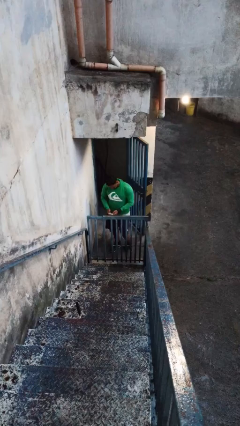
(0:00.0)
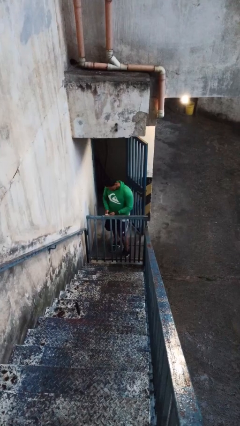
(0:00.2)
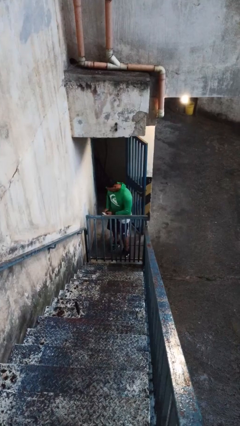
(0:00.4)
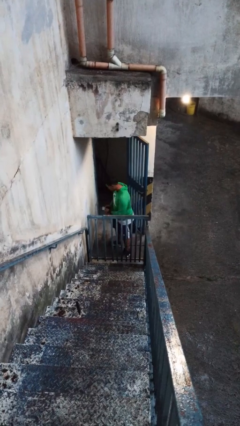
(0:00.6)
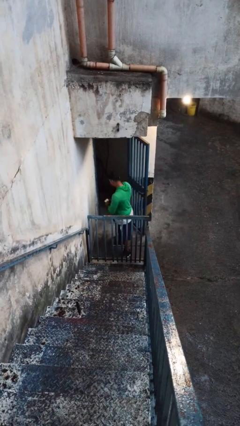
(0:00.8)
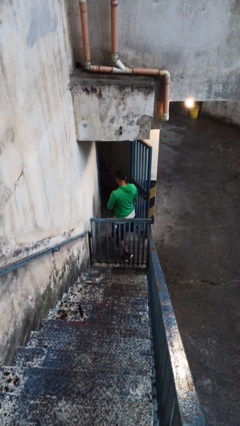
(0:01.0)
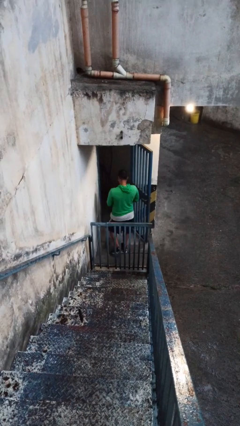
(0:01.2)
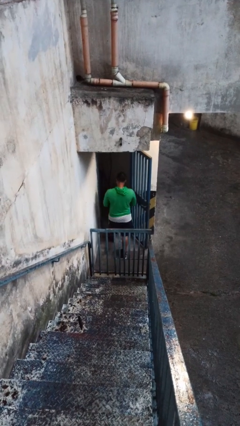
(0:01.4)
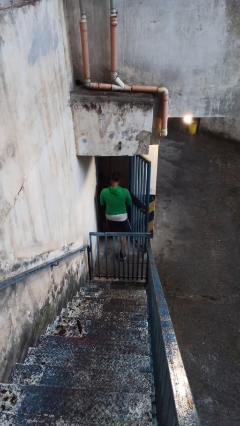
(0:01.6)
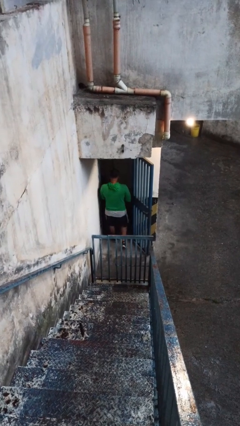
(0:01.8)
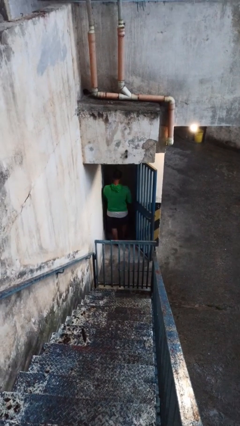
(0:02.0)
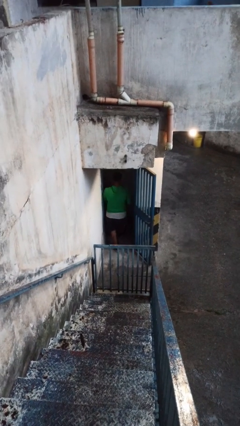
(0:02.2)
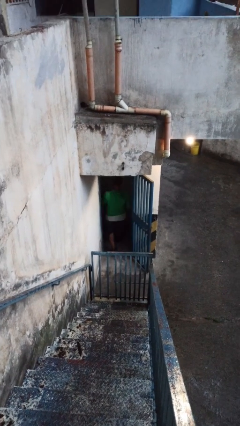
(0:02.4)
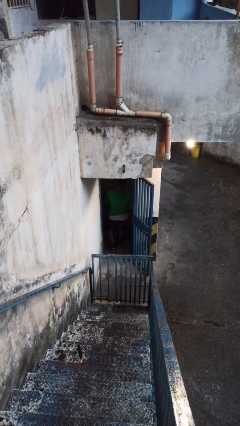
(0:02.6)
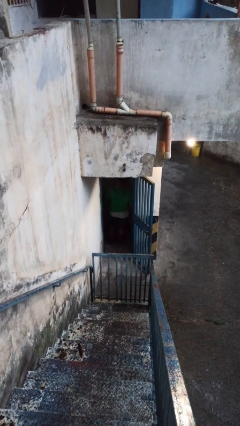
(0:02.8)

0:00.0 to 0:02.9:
person exits scene through structure

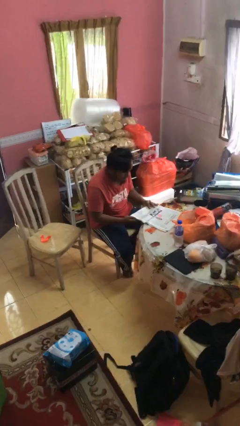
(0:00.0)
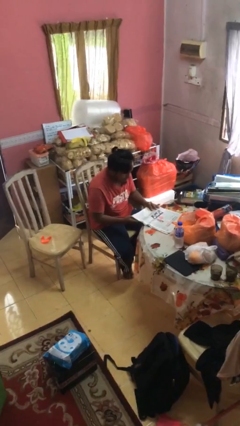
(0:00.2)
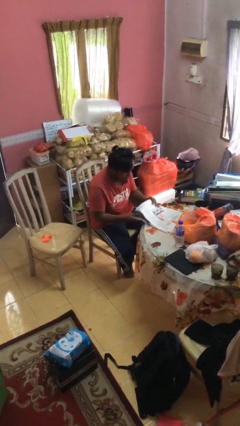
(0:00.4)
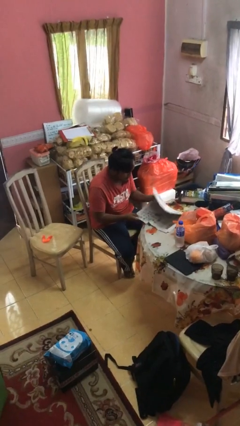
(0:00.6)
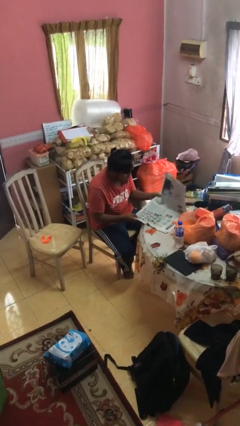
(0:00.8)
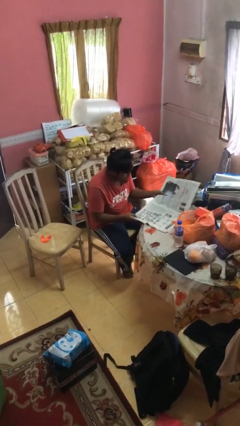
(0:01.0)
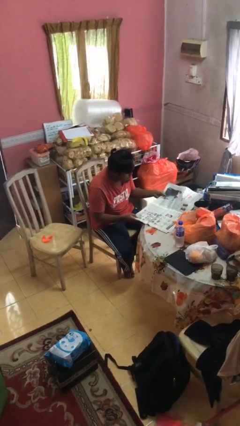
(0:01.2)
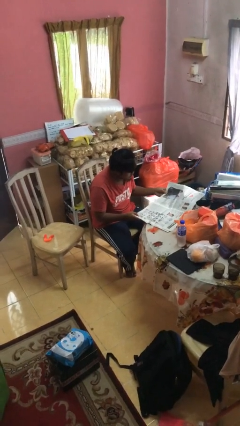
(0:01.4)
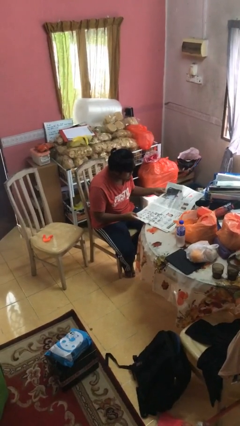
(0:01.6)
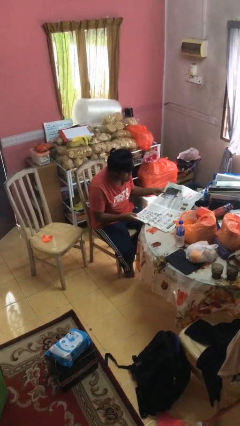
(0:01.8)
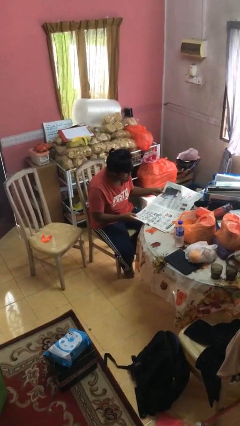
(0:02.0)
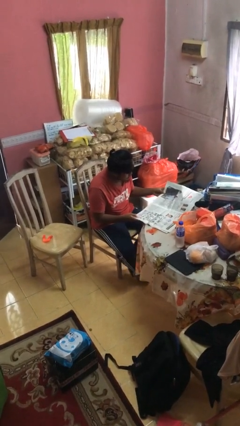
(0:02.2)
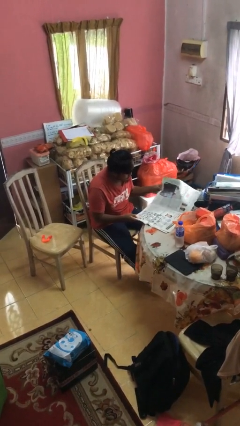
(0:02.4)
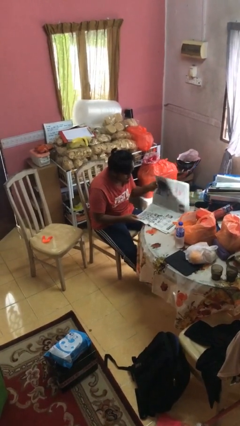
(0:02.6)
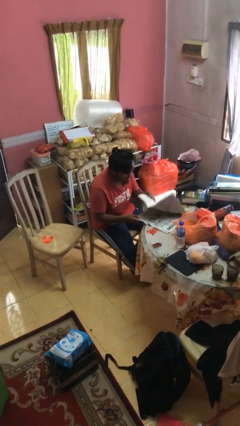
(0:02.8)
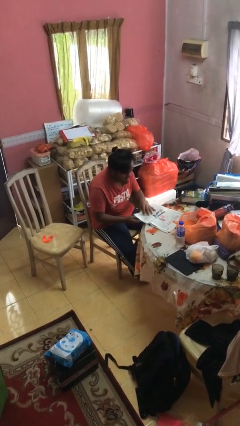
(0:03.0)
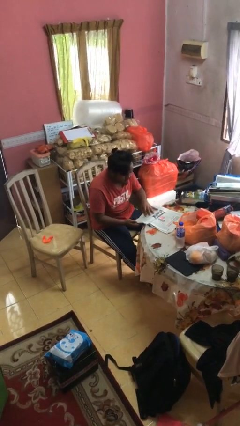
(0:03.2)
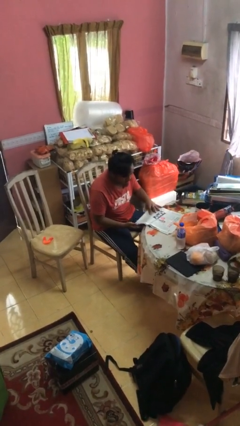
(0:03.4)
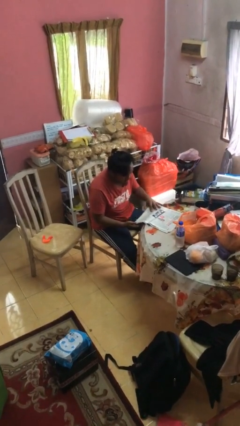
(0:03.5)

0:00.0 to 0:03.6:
person reads newspaper

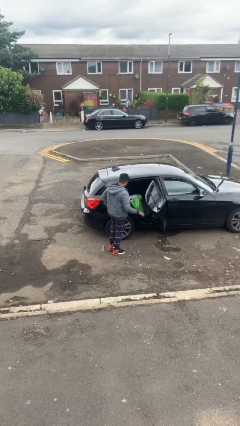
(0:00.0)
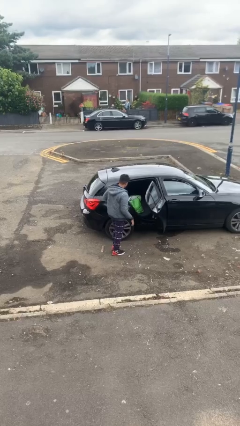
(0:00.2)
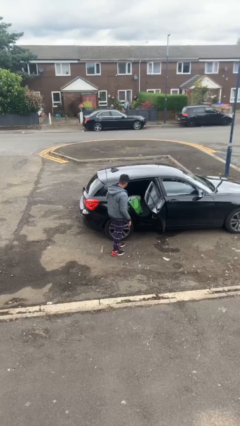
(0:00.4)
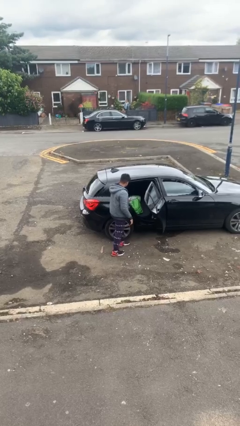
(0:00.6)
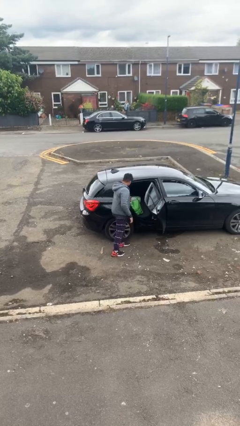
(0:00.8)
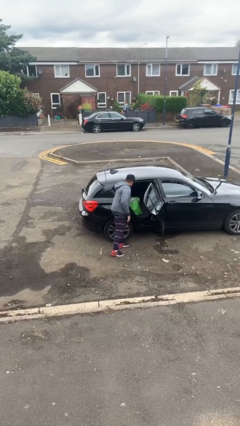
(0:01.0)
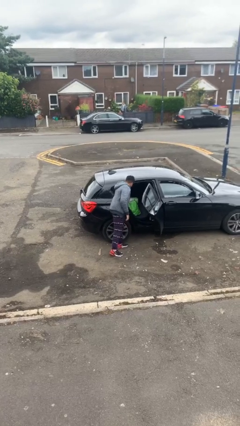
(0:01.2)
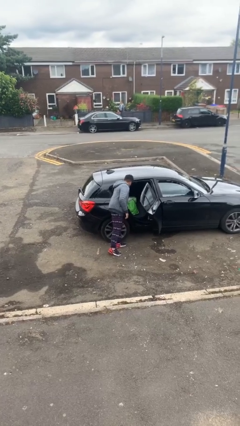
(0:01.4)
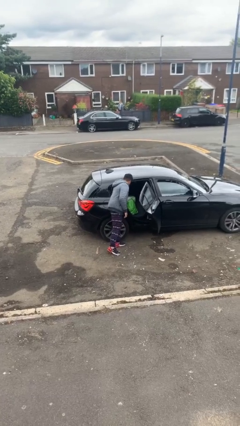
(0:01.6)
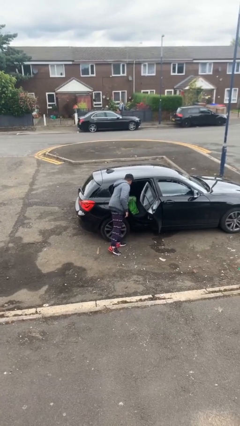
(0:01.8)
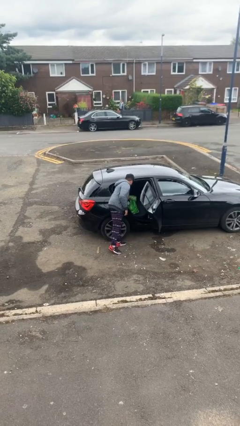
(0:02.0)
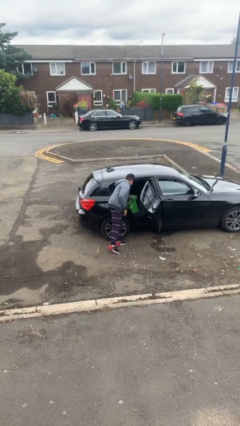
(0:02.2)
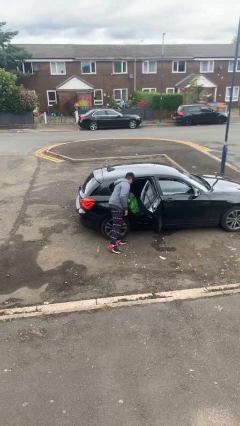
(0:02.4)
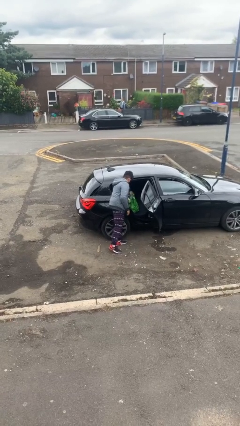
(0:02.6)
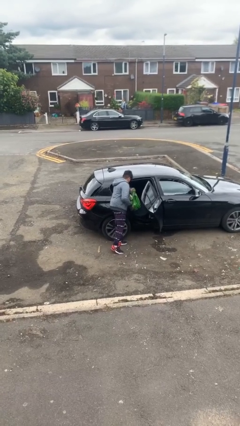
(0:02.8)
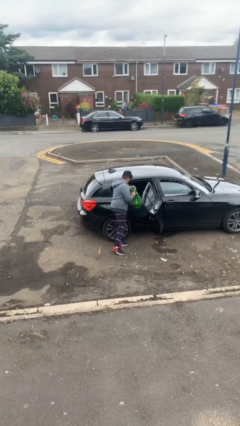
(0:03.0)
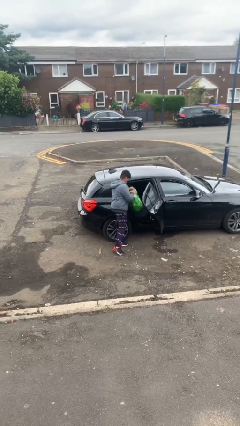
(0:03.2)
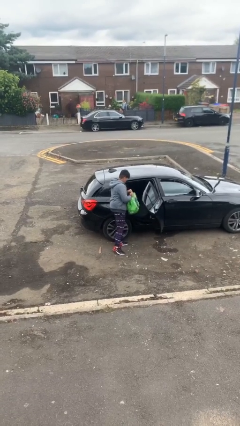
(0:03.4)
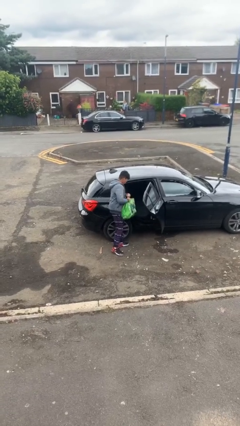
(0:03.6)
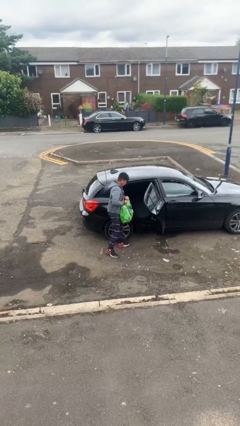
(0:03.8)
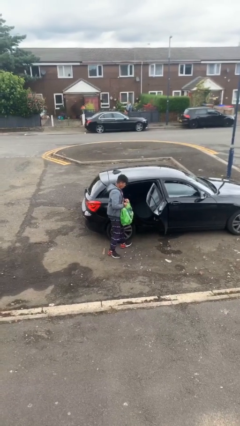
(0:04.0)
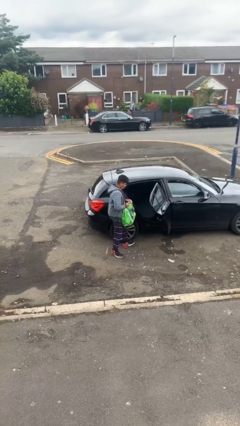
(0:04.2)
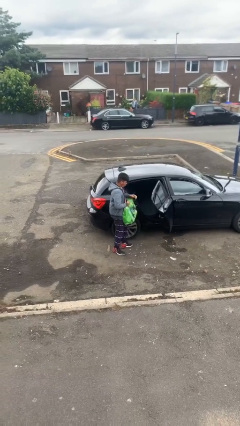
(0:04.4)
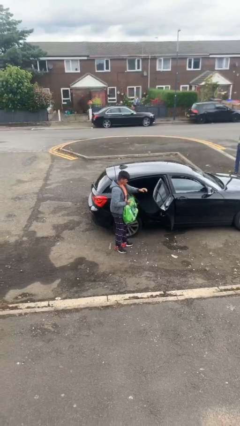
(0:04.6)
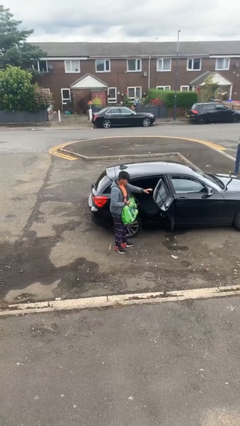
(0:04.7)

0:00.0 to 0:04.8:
person unloads car

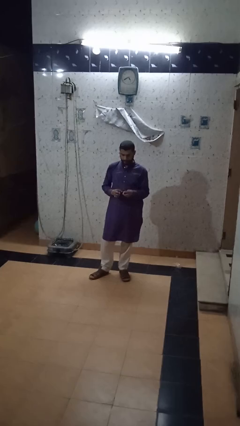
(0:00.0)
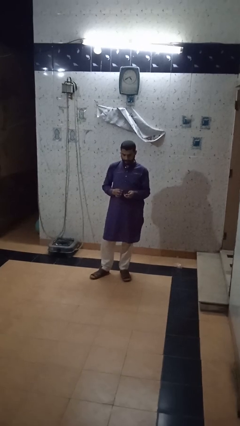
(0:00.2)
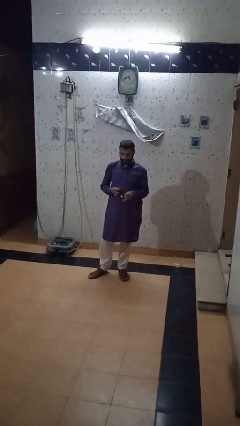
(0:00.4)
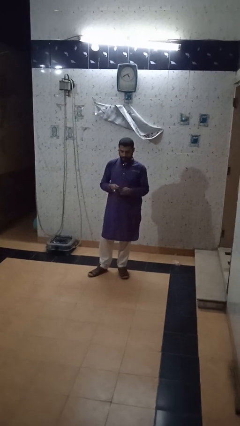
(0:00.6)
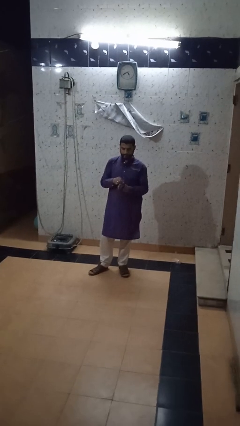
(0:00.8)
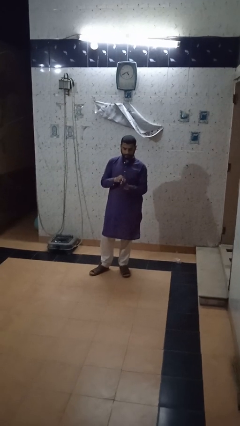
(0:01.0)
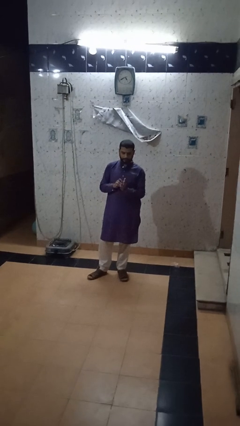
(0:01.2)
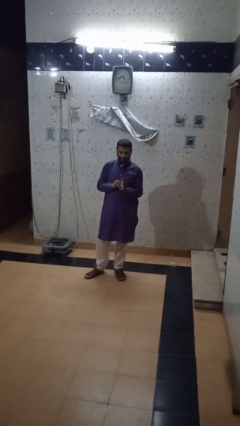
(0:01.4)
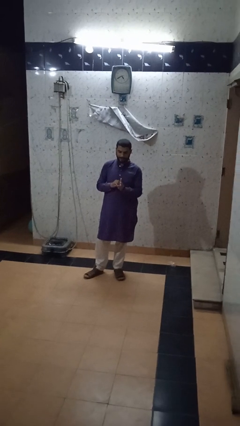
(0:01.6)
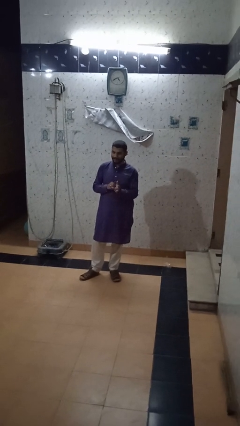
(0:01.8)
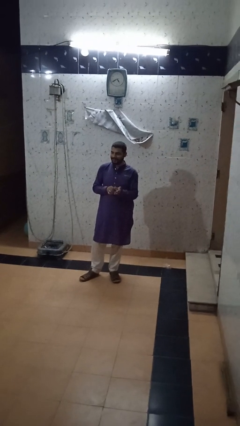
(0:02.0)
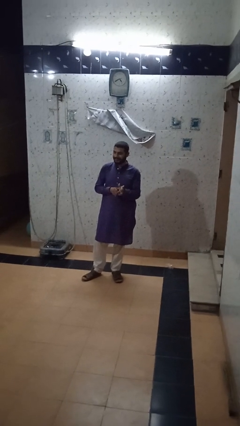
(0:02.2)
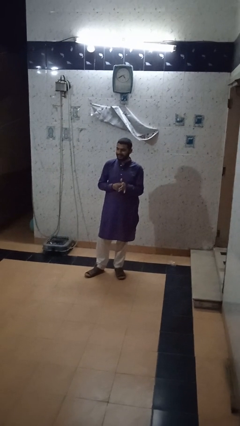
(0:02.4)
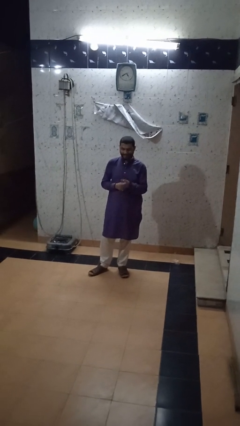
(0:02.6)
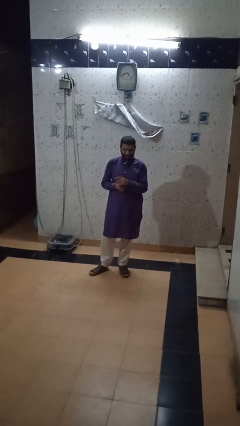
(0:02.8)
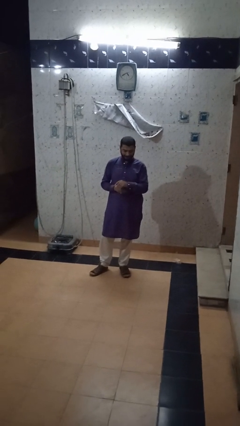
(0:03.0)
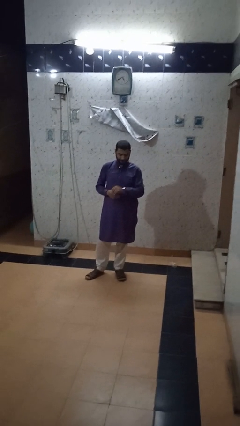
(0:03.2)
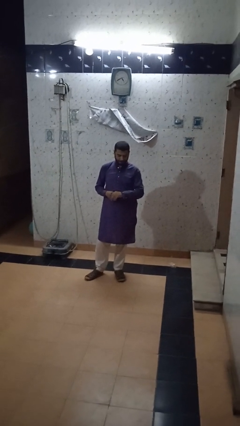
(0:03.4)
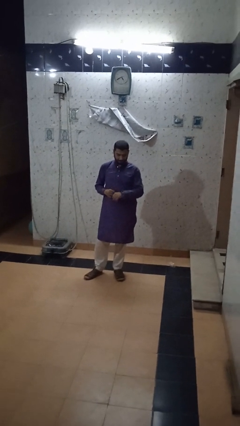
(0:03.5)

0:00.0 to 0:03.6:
person puts on wristwatch

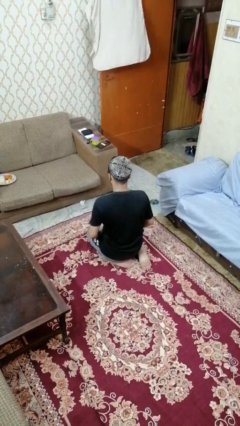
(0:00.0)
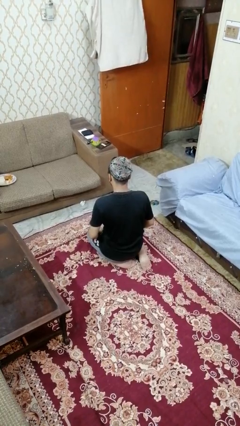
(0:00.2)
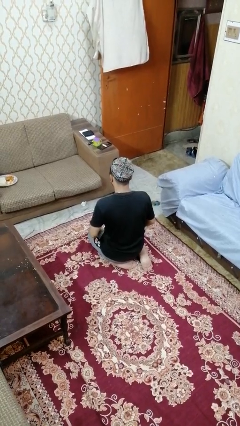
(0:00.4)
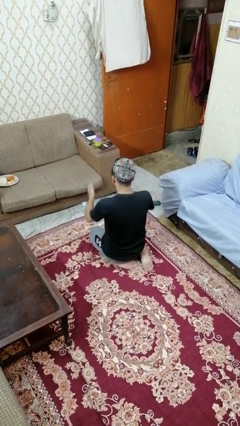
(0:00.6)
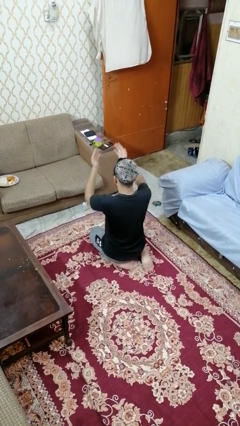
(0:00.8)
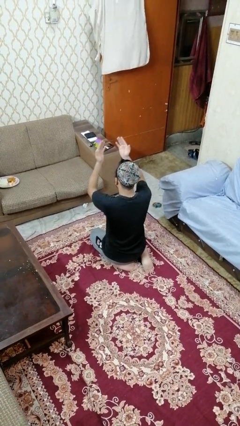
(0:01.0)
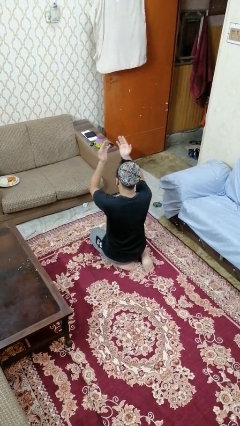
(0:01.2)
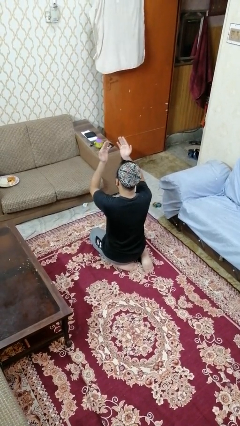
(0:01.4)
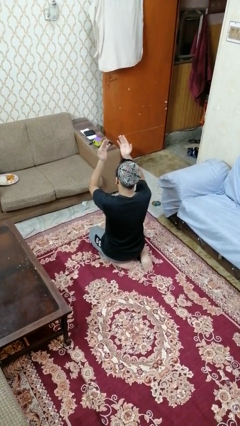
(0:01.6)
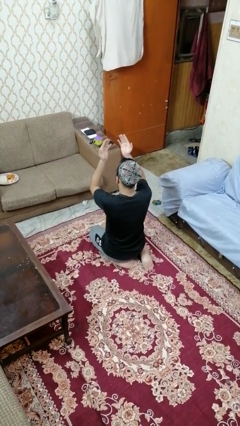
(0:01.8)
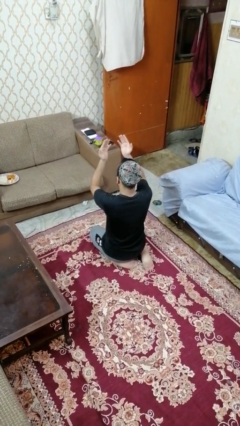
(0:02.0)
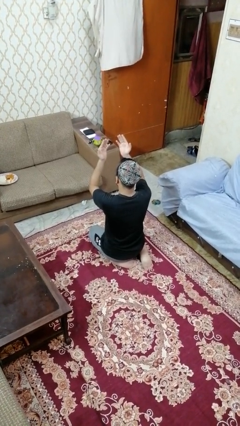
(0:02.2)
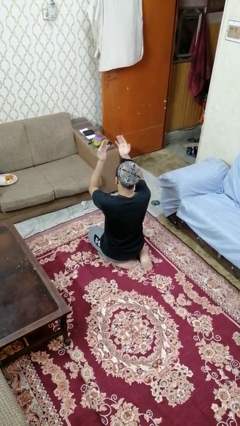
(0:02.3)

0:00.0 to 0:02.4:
person prays

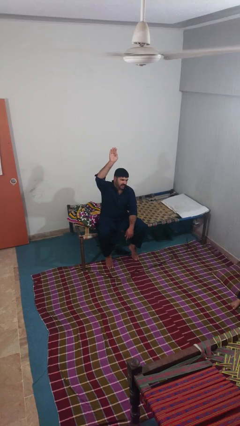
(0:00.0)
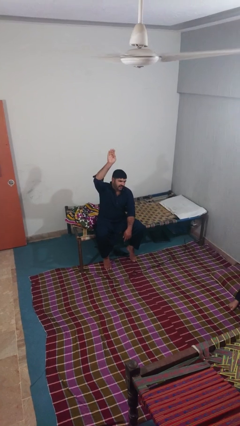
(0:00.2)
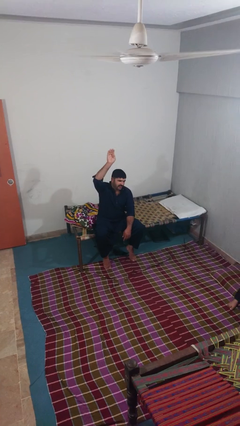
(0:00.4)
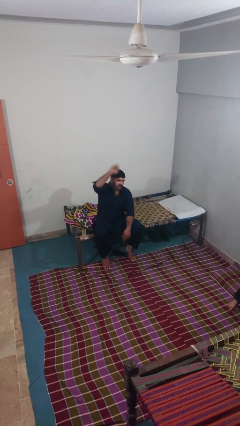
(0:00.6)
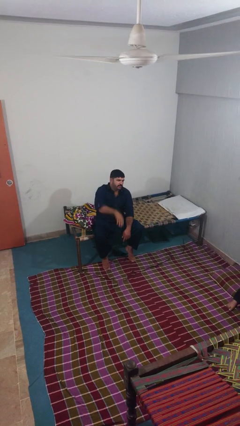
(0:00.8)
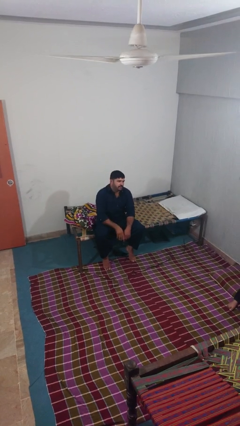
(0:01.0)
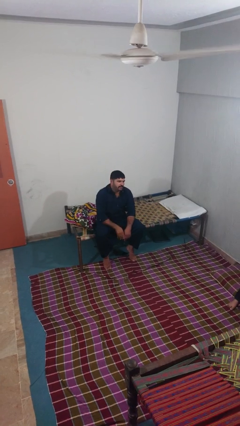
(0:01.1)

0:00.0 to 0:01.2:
person gestures lower hand
